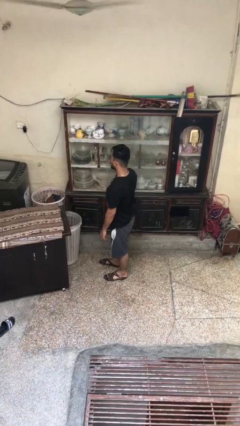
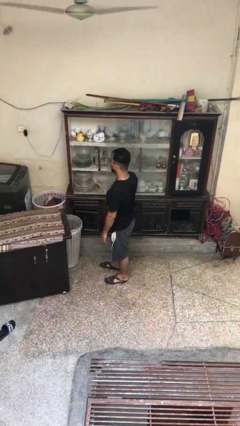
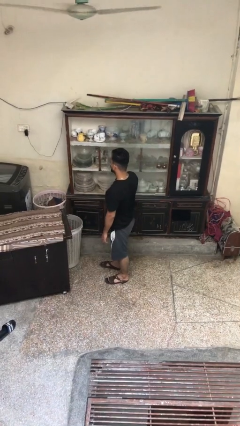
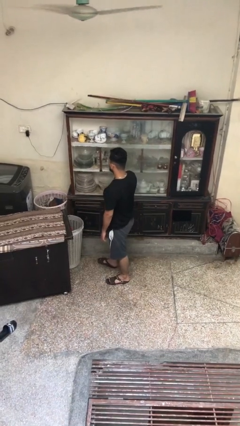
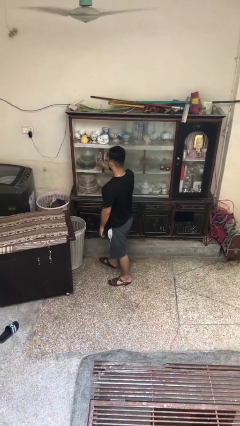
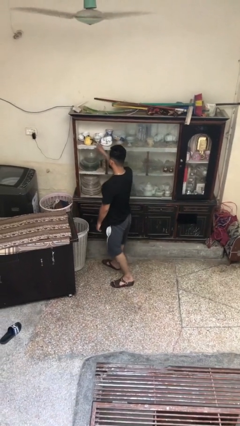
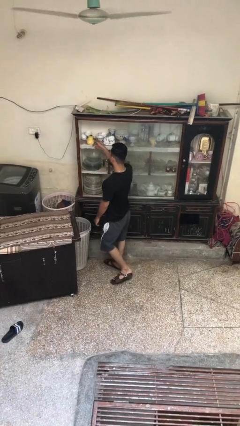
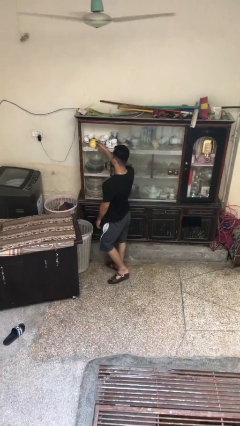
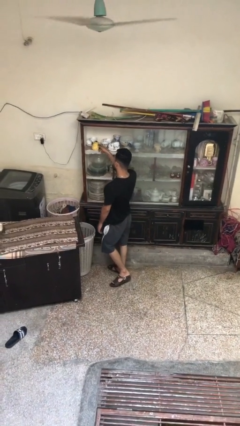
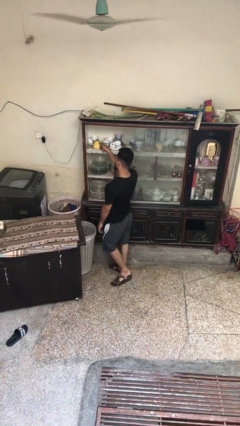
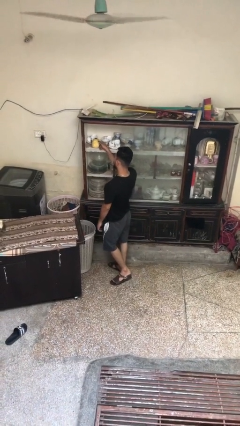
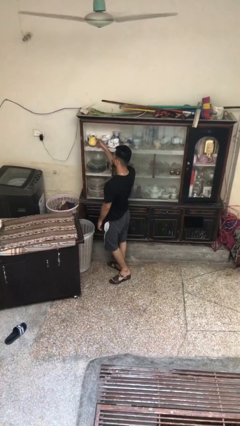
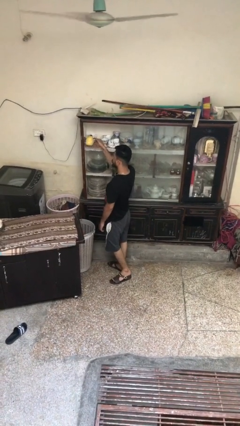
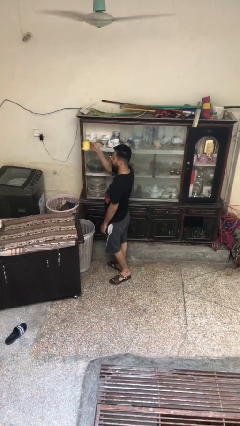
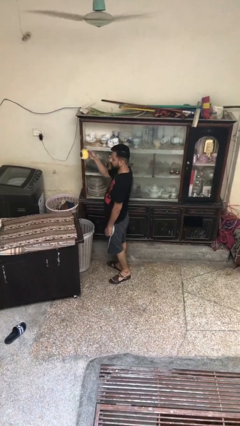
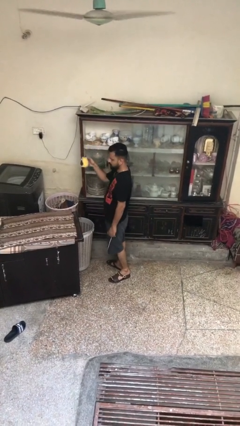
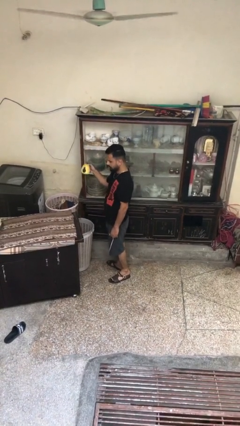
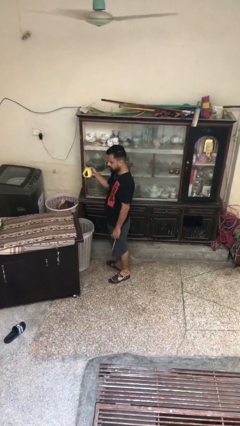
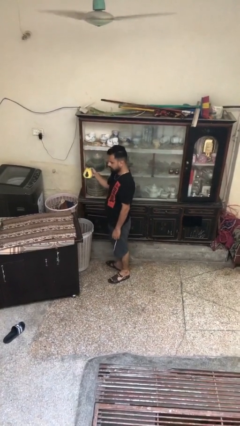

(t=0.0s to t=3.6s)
person picks up object from shelf

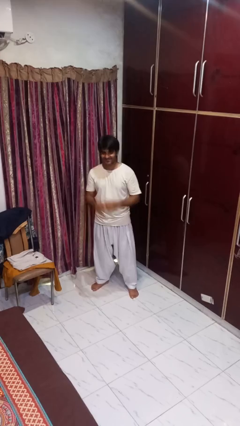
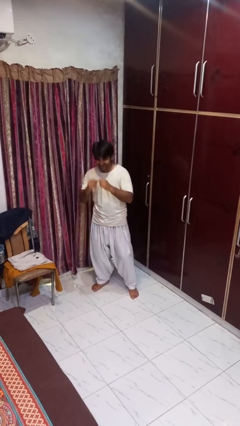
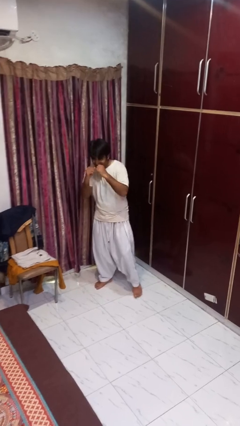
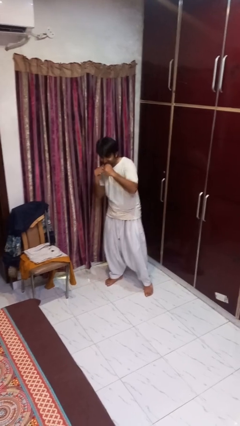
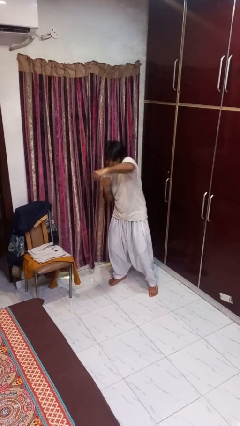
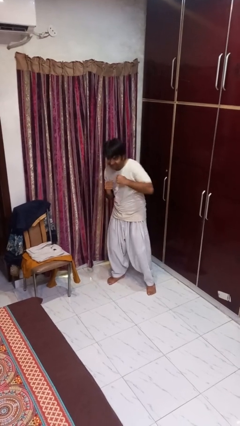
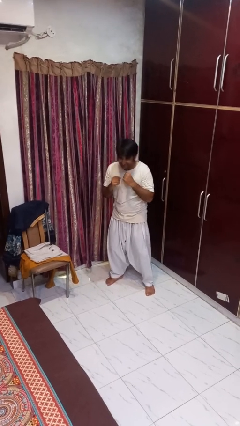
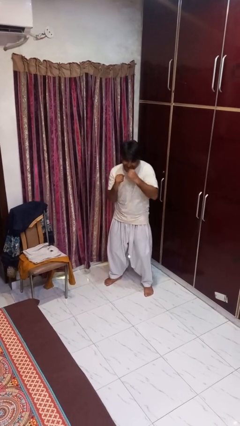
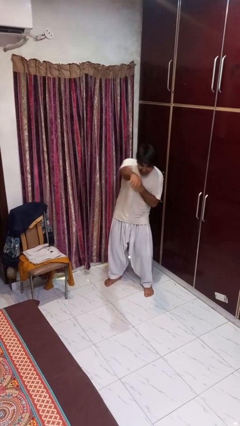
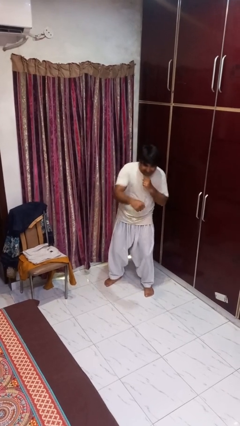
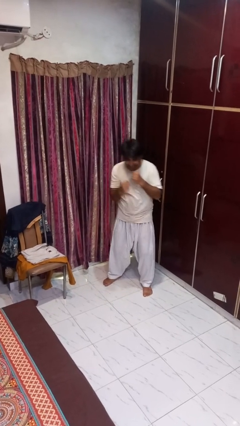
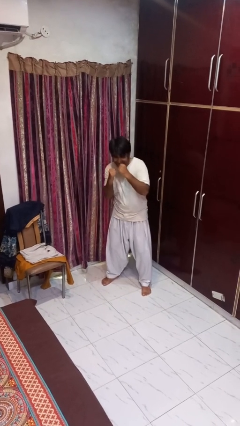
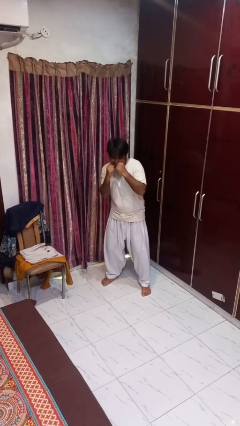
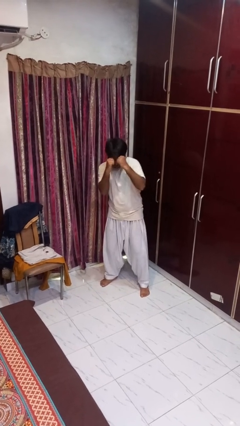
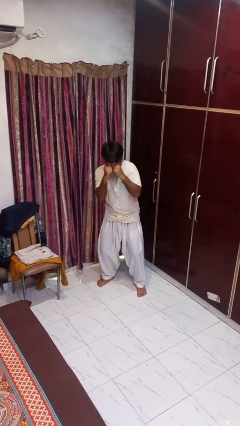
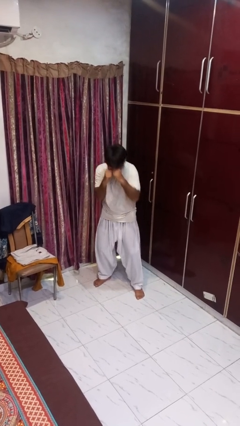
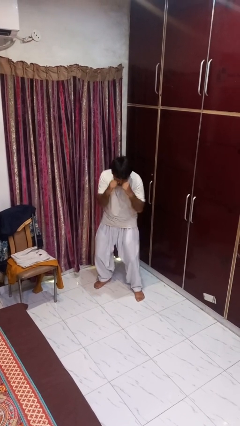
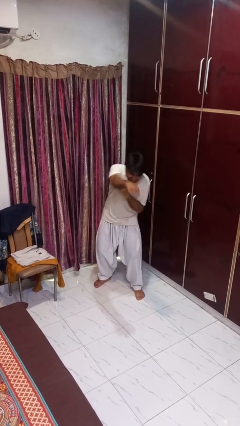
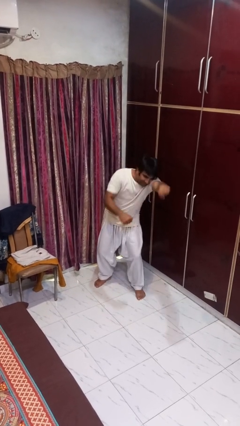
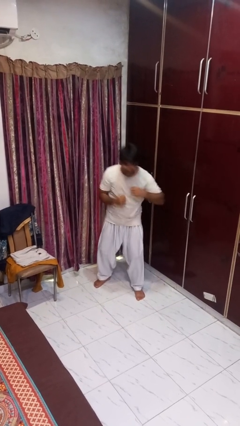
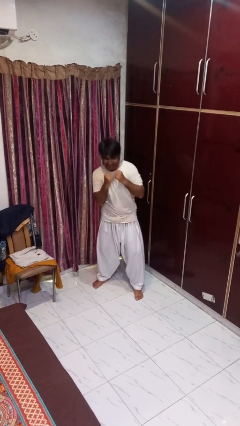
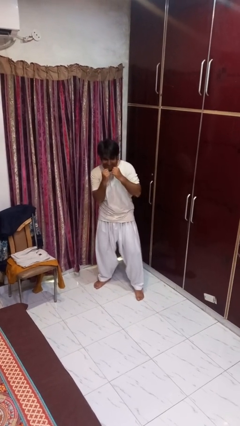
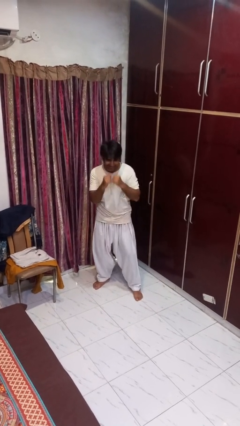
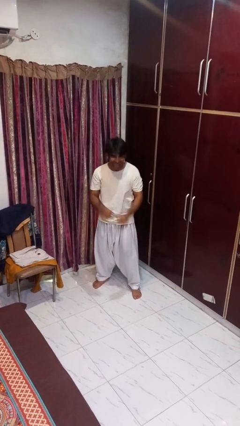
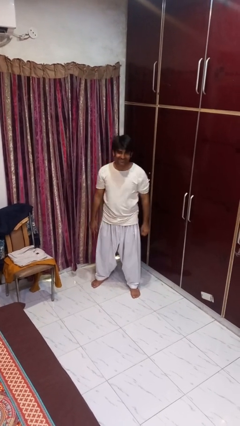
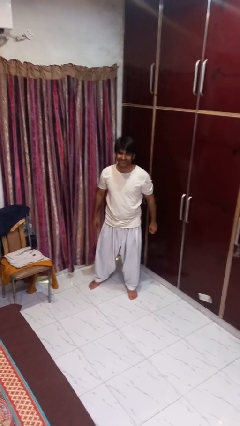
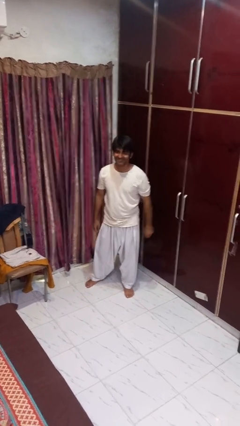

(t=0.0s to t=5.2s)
person punches

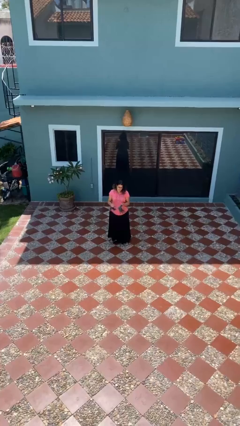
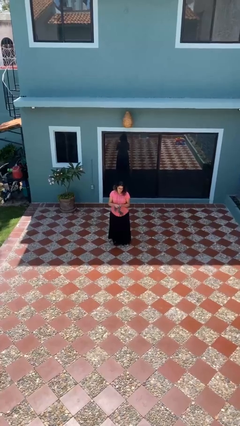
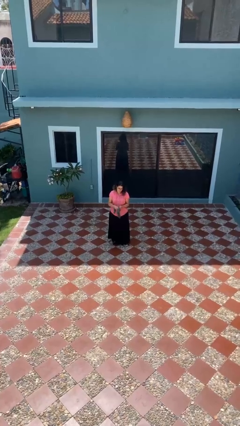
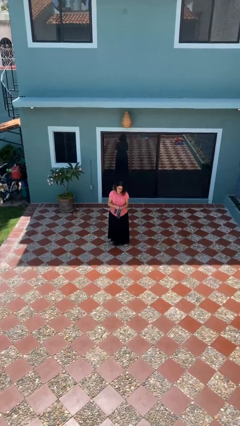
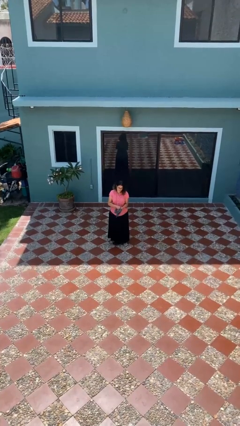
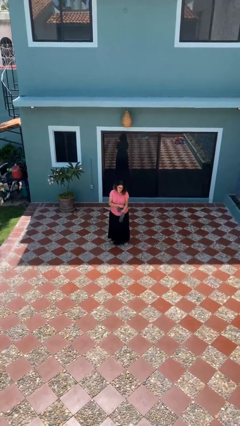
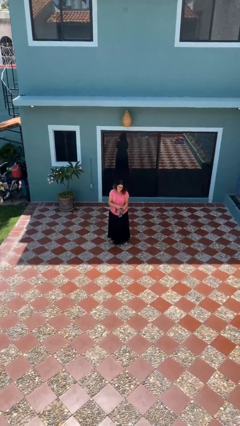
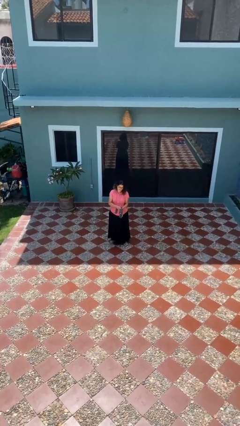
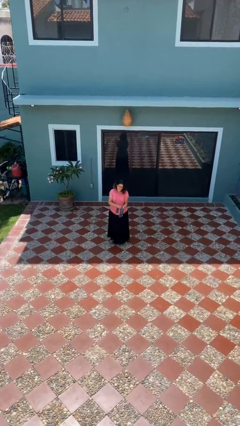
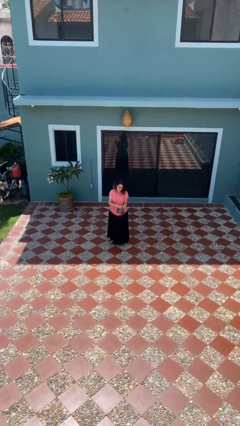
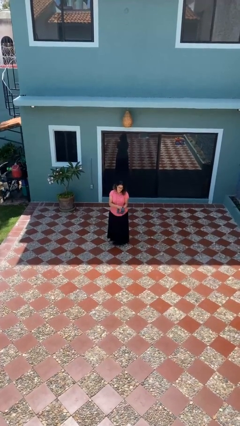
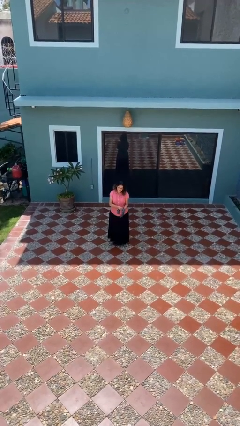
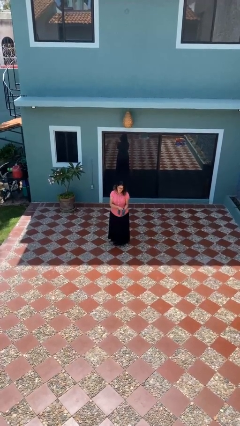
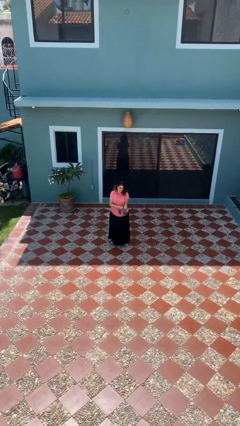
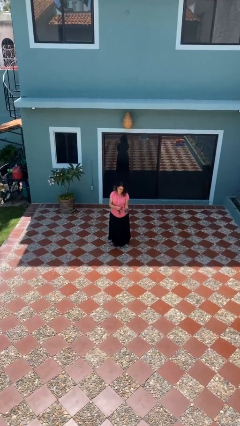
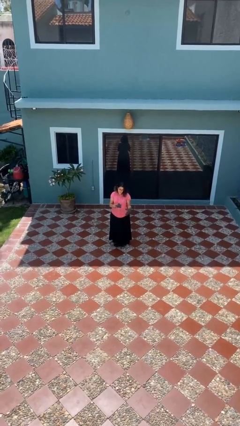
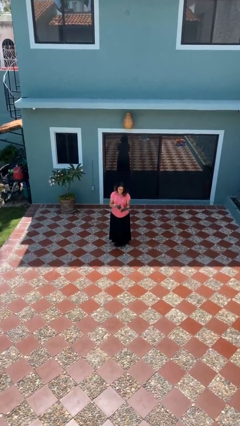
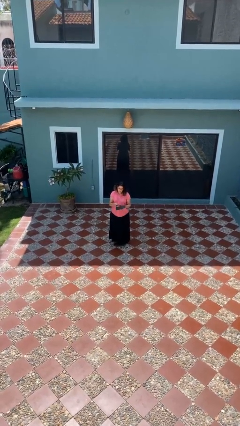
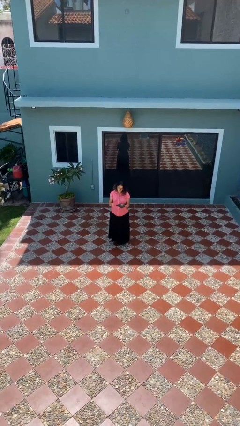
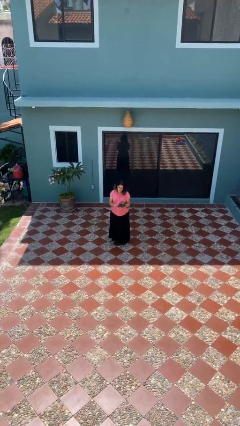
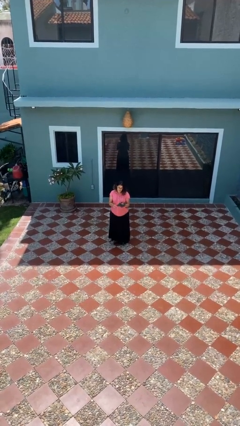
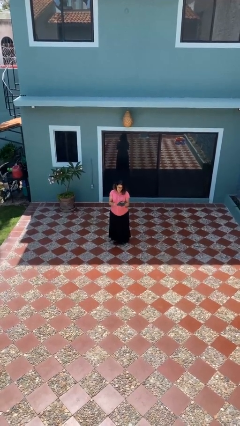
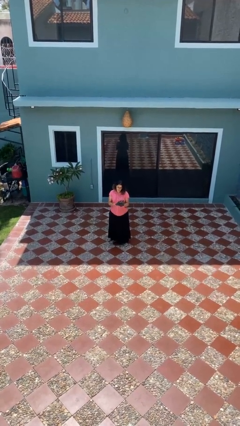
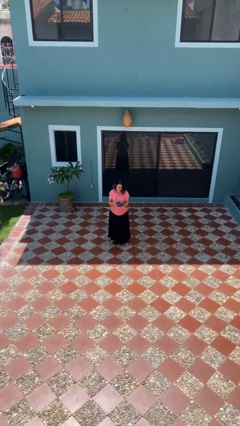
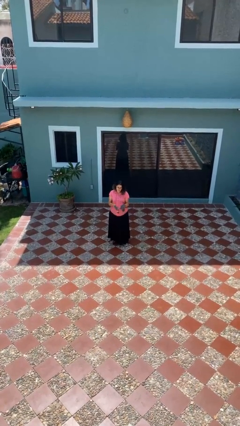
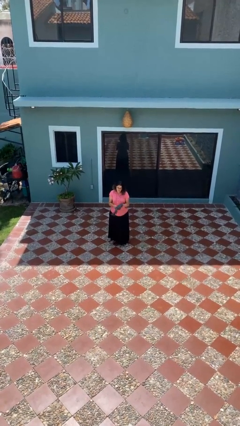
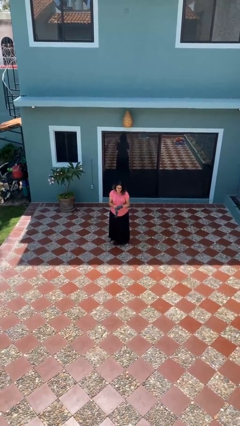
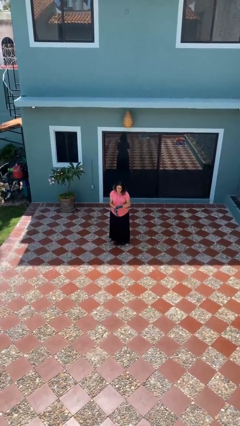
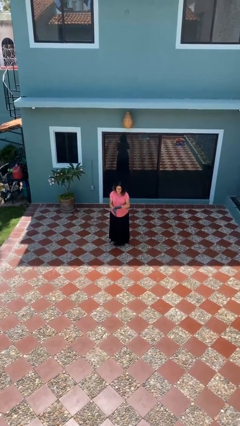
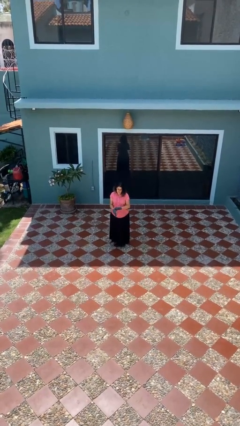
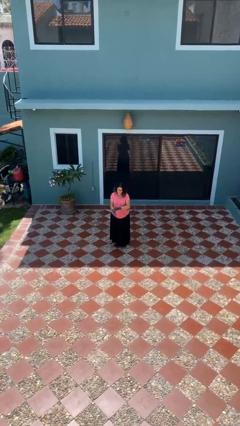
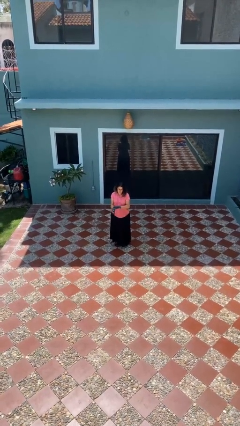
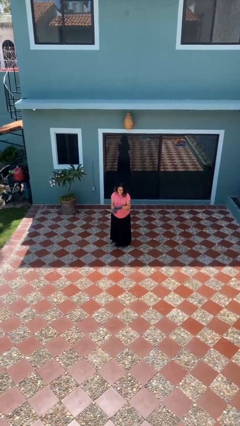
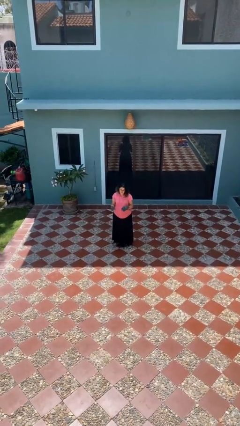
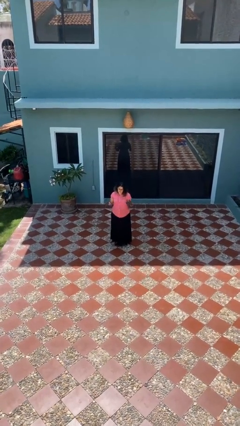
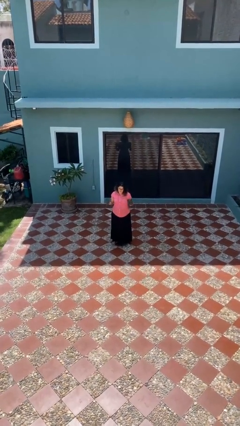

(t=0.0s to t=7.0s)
person puts on gloves

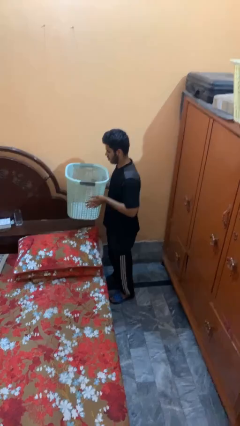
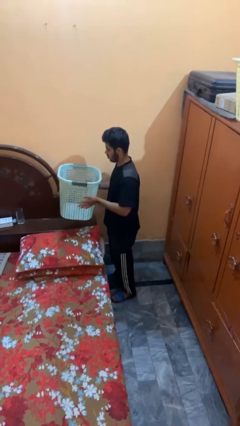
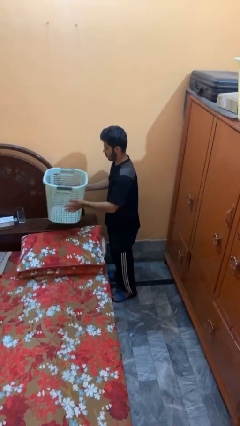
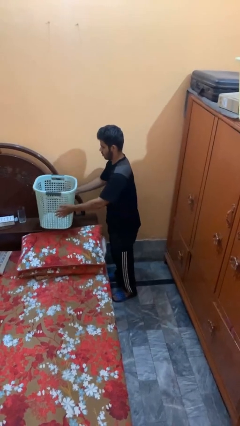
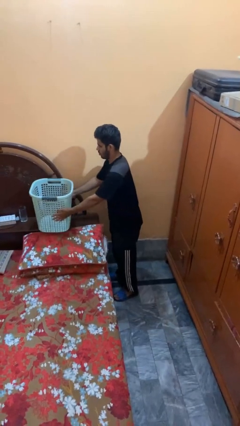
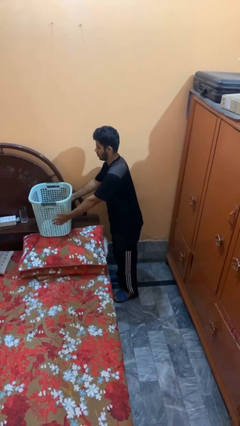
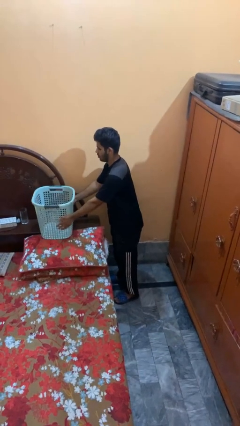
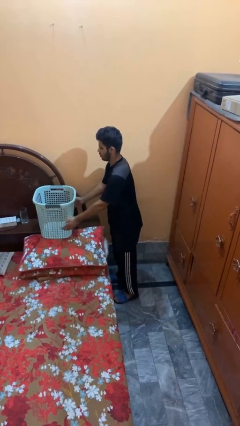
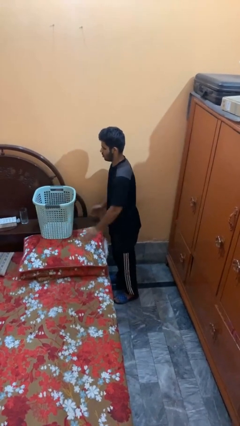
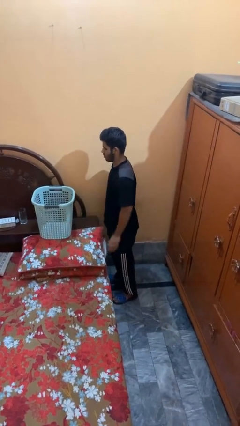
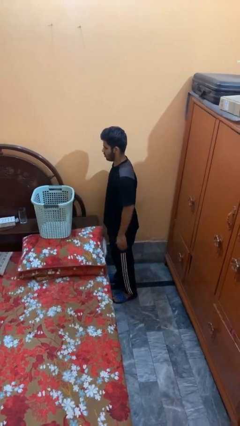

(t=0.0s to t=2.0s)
person puts down object on bed
